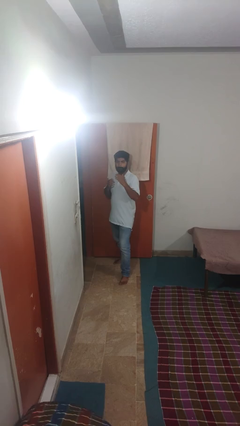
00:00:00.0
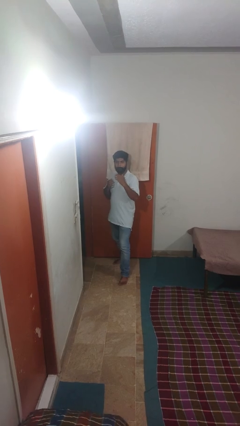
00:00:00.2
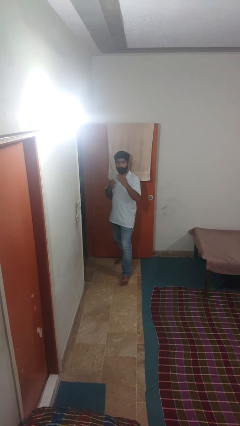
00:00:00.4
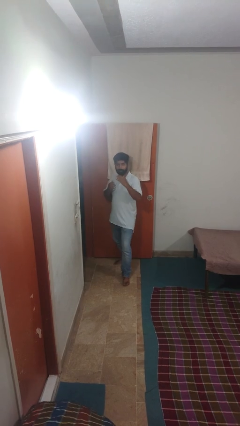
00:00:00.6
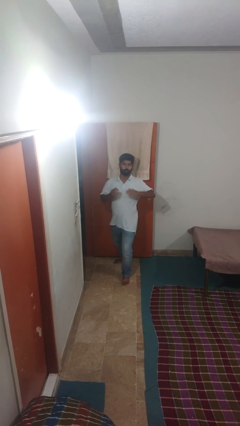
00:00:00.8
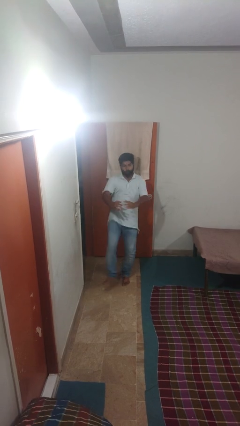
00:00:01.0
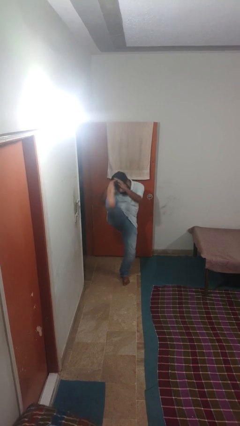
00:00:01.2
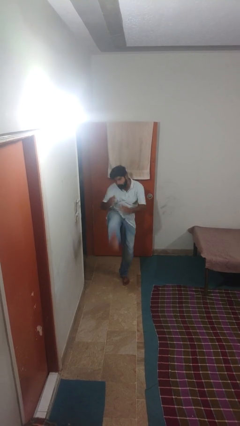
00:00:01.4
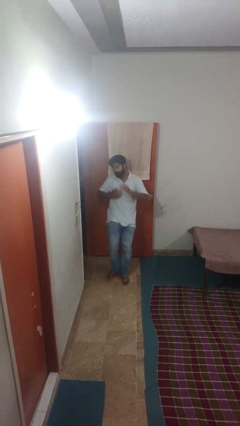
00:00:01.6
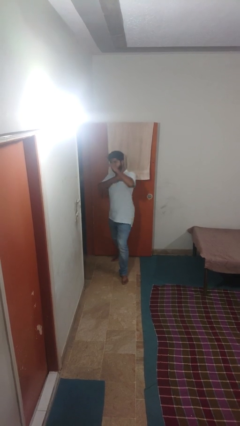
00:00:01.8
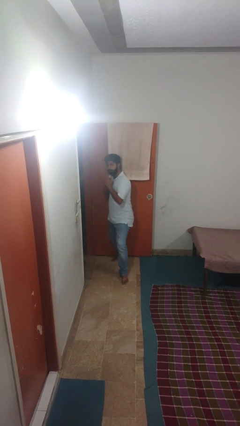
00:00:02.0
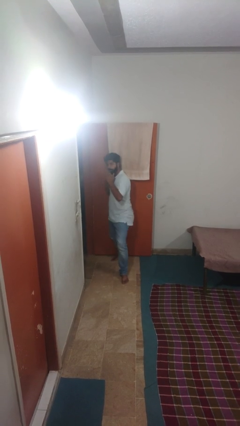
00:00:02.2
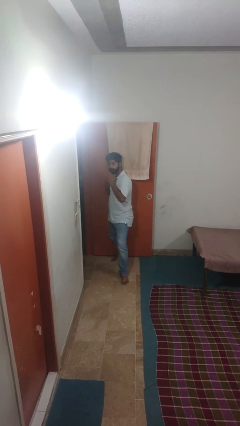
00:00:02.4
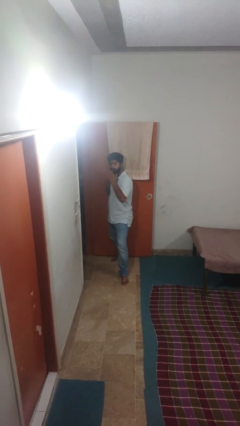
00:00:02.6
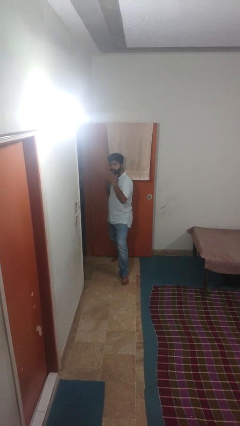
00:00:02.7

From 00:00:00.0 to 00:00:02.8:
person karate kicks

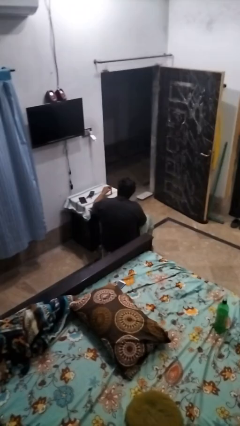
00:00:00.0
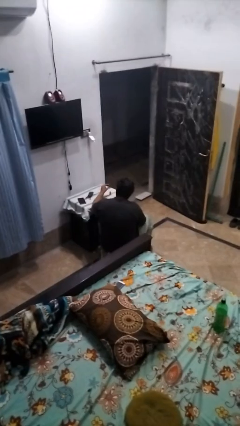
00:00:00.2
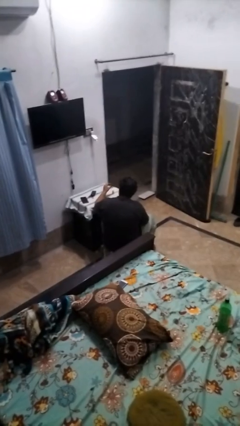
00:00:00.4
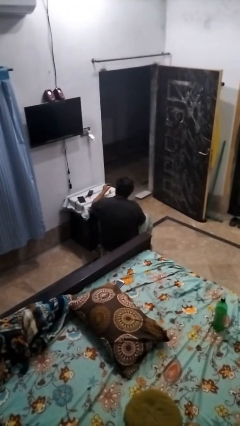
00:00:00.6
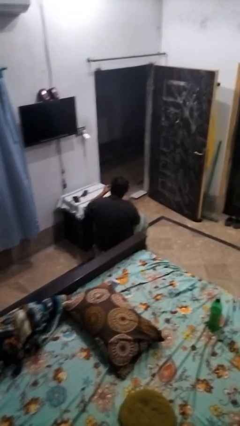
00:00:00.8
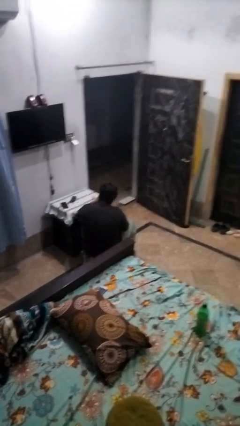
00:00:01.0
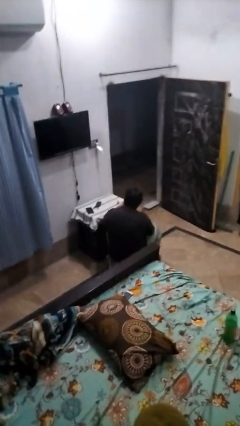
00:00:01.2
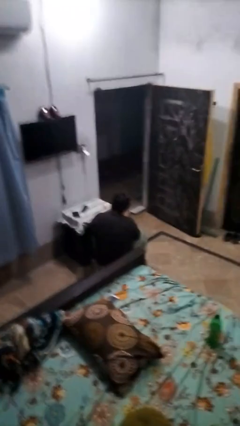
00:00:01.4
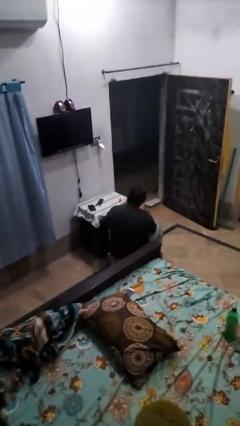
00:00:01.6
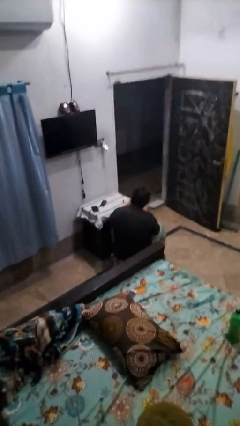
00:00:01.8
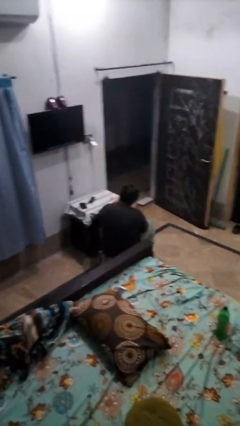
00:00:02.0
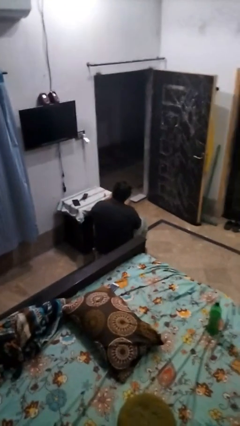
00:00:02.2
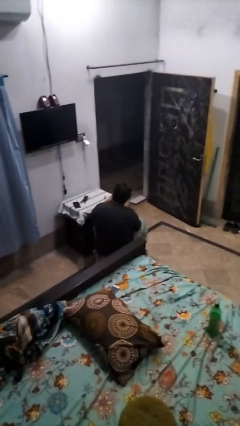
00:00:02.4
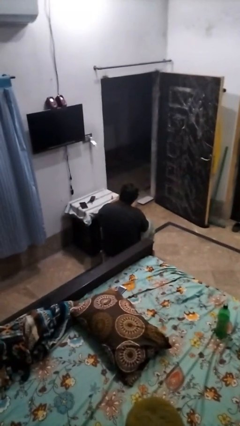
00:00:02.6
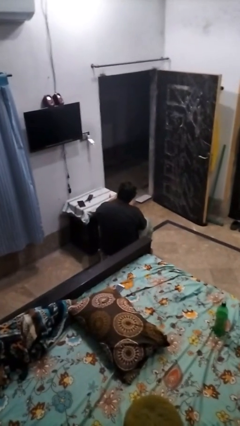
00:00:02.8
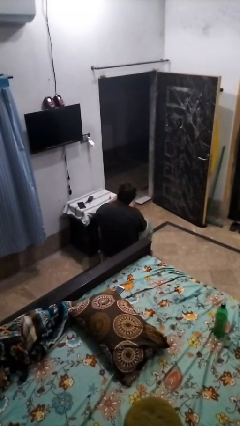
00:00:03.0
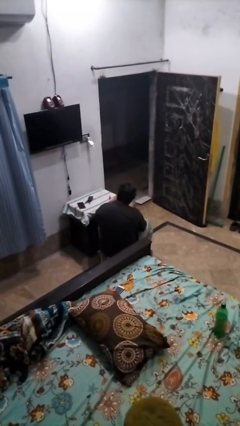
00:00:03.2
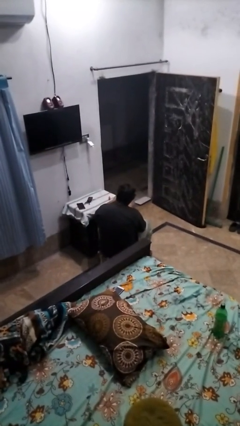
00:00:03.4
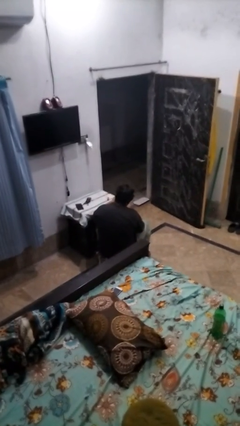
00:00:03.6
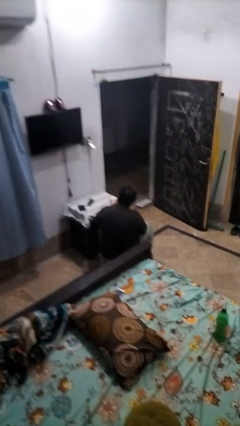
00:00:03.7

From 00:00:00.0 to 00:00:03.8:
person paints fingernails

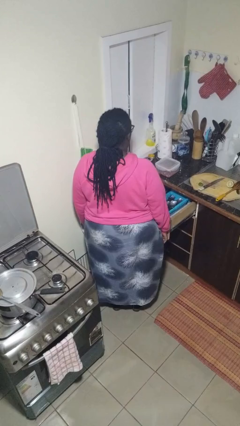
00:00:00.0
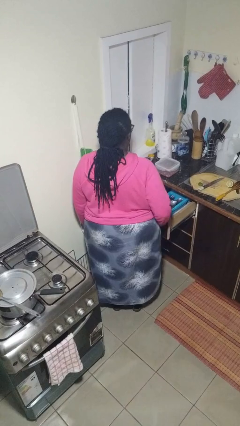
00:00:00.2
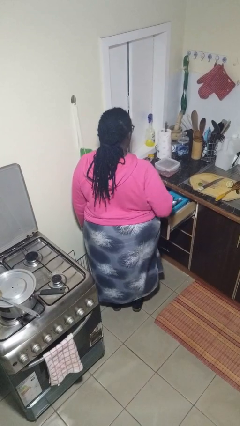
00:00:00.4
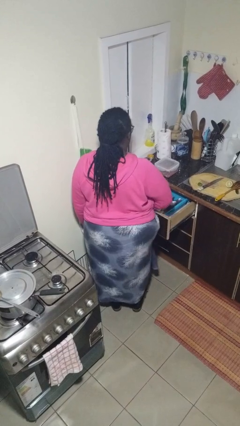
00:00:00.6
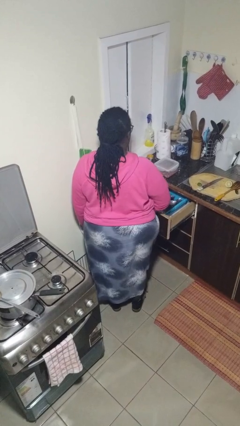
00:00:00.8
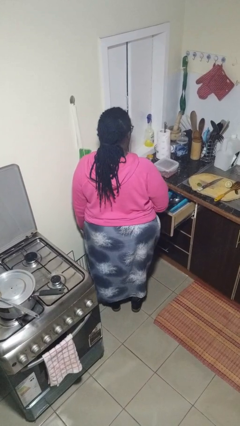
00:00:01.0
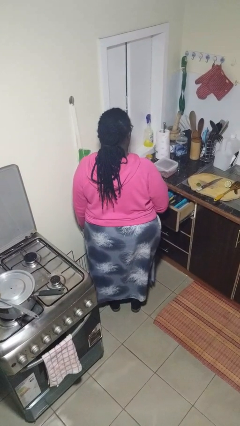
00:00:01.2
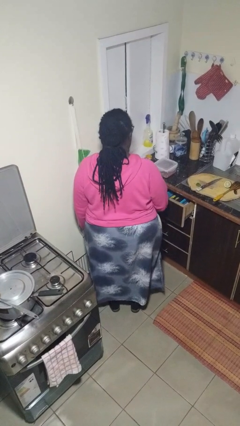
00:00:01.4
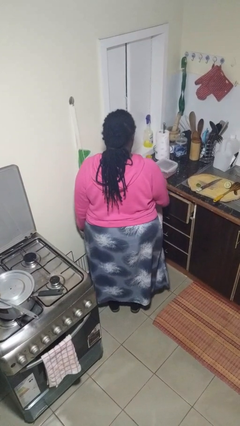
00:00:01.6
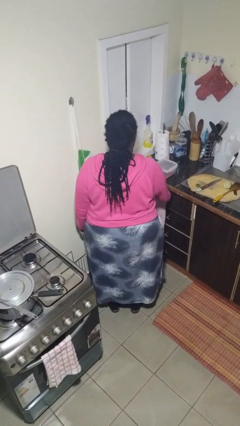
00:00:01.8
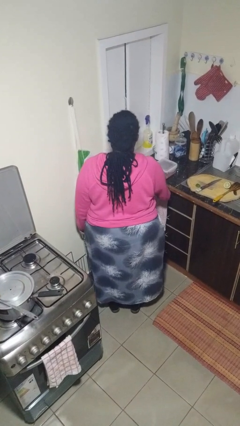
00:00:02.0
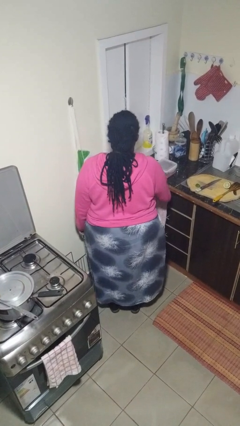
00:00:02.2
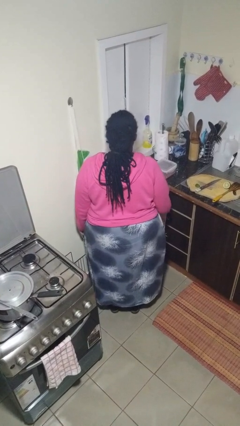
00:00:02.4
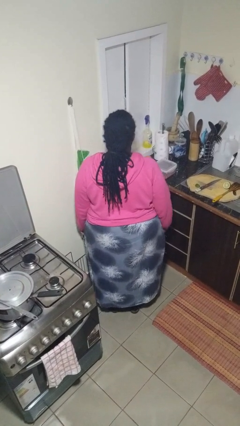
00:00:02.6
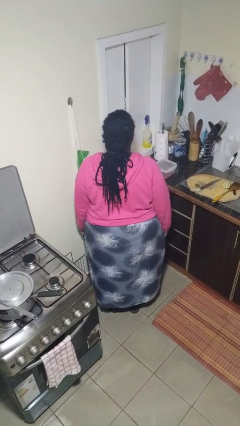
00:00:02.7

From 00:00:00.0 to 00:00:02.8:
person closes kitchen drawer

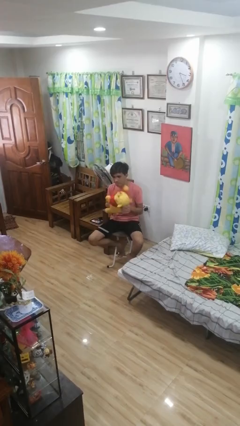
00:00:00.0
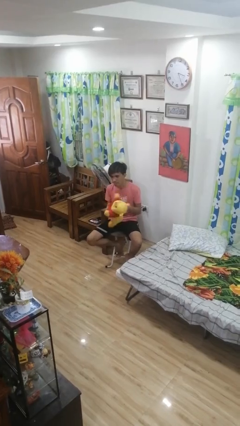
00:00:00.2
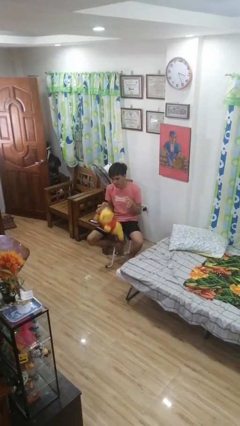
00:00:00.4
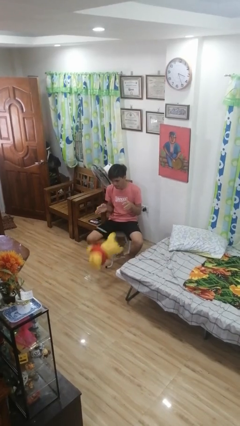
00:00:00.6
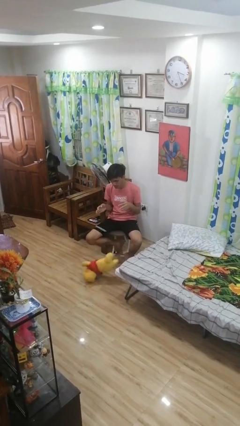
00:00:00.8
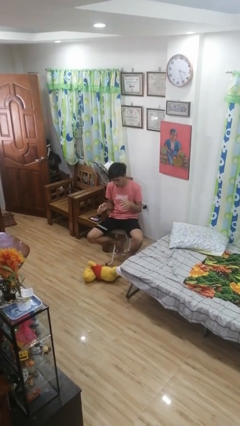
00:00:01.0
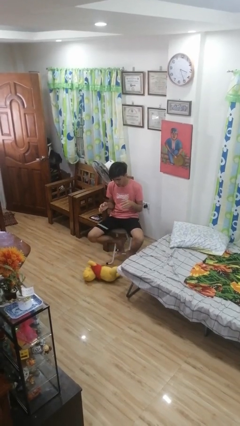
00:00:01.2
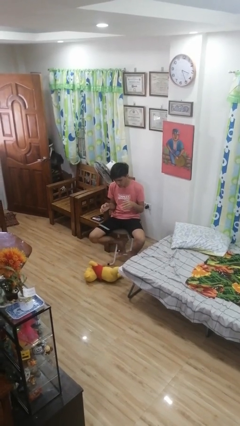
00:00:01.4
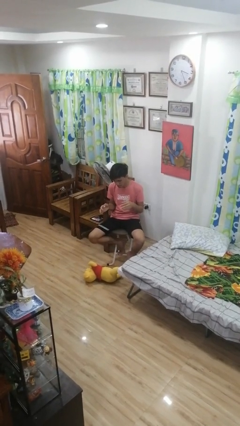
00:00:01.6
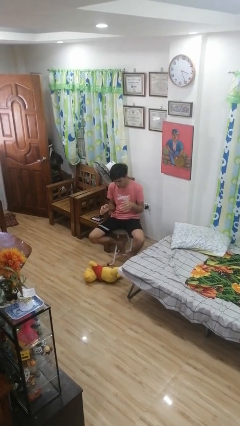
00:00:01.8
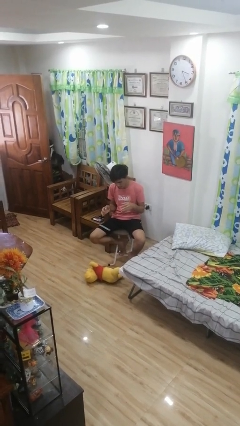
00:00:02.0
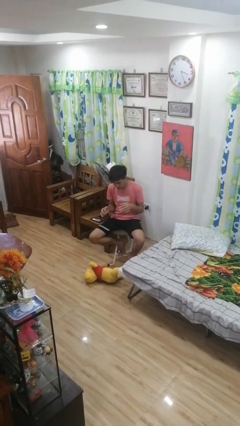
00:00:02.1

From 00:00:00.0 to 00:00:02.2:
person drops object

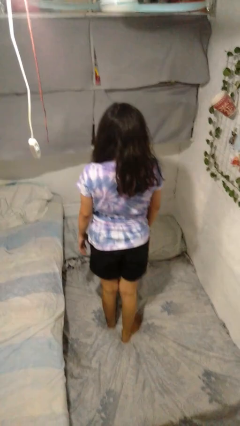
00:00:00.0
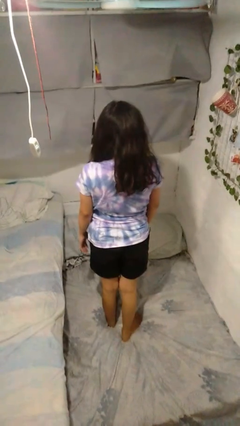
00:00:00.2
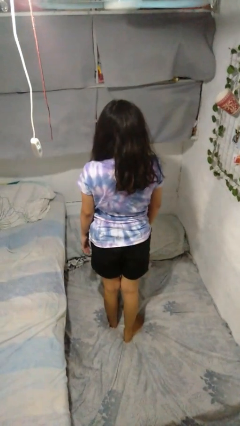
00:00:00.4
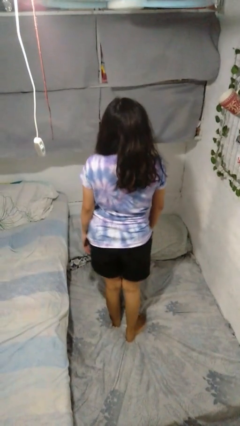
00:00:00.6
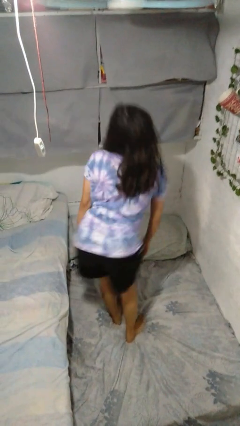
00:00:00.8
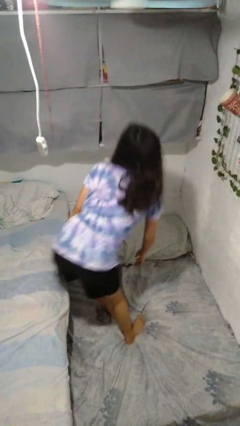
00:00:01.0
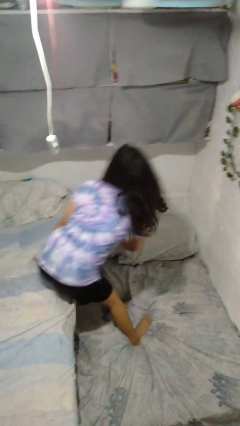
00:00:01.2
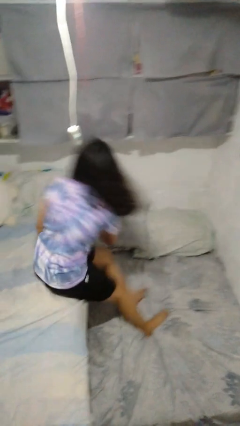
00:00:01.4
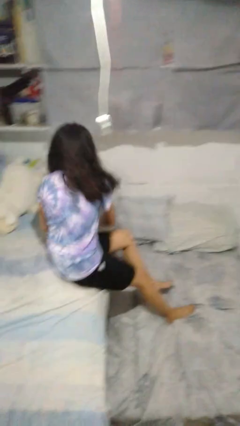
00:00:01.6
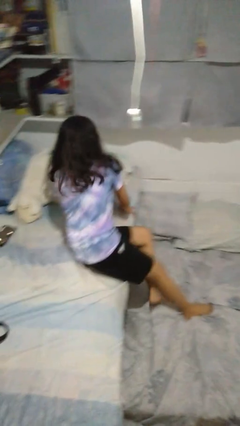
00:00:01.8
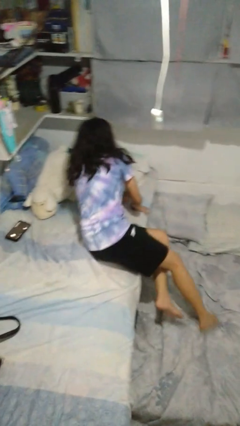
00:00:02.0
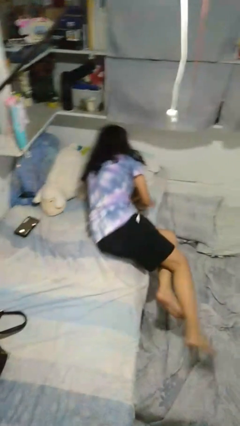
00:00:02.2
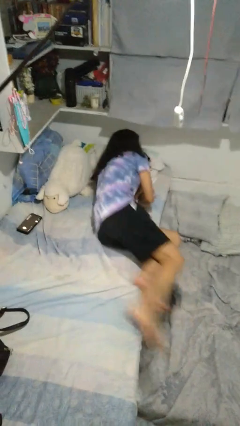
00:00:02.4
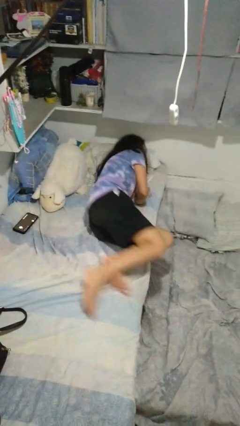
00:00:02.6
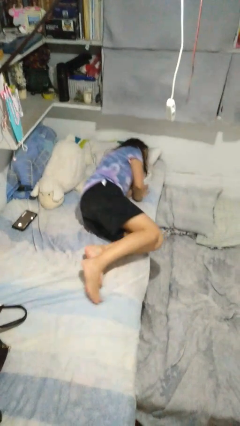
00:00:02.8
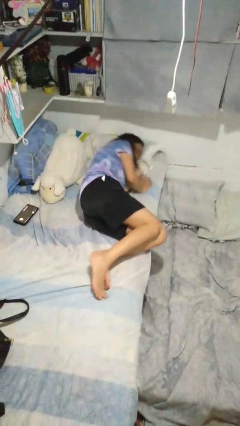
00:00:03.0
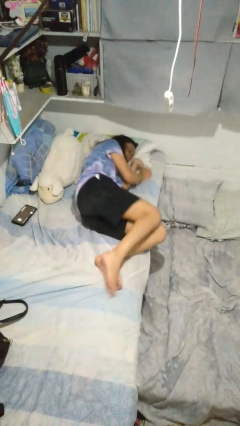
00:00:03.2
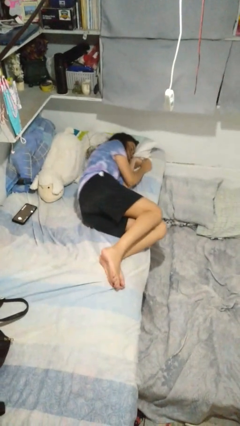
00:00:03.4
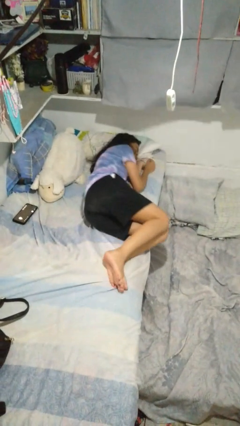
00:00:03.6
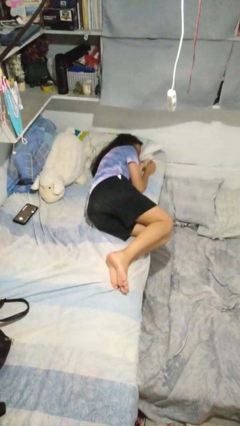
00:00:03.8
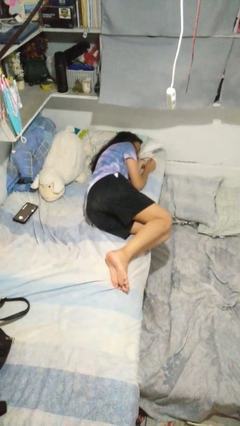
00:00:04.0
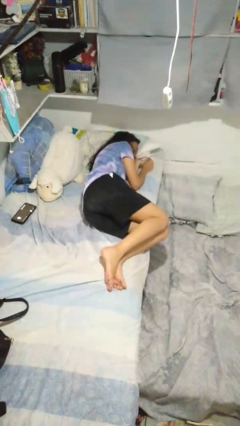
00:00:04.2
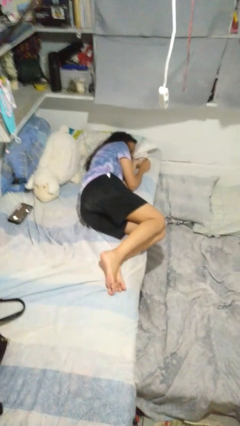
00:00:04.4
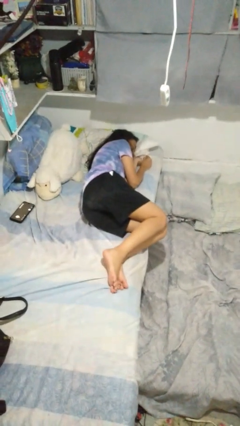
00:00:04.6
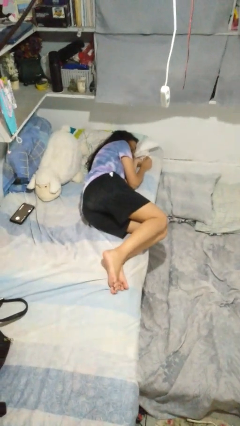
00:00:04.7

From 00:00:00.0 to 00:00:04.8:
person lies down on bed

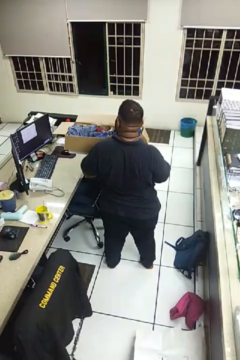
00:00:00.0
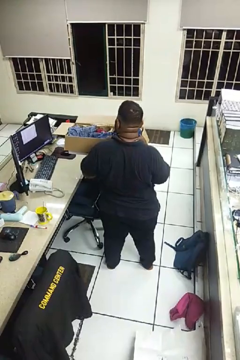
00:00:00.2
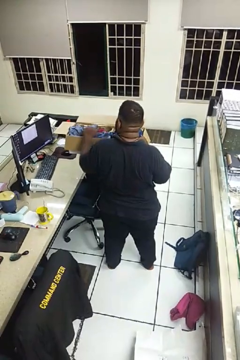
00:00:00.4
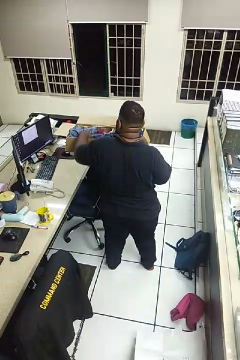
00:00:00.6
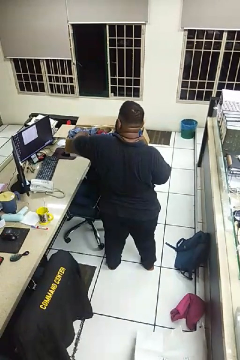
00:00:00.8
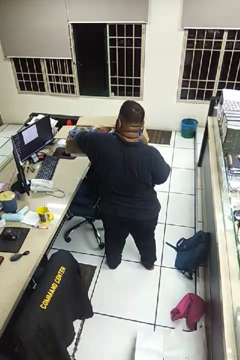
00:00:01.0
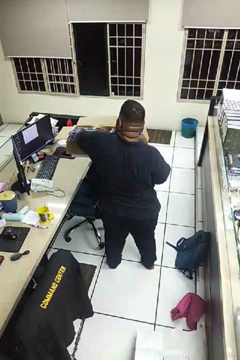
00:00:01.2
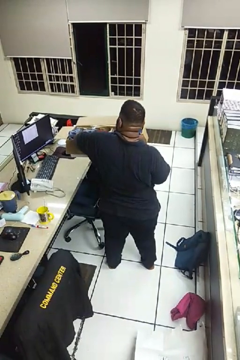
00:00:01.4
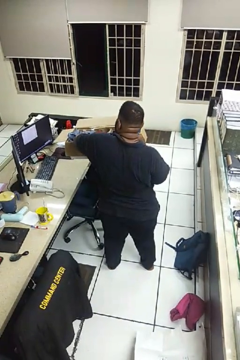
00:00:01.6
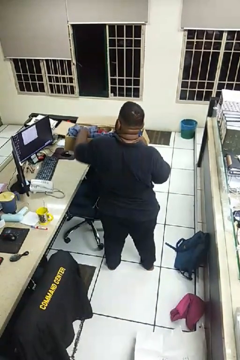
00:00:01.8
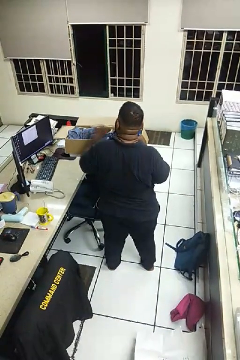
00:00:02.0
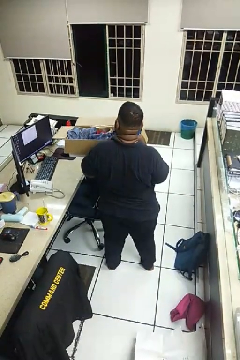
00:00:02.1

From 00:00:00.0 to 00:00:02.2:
person searches in box
